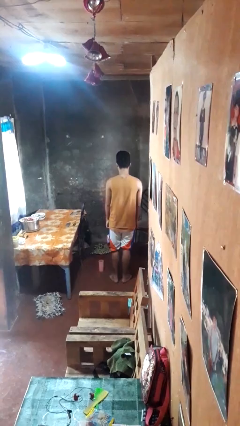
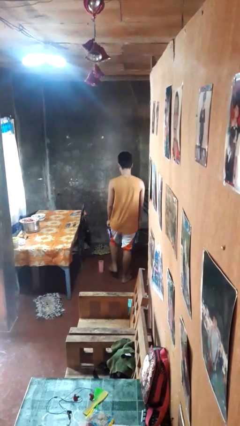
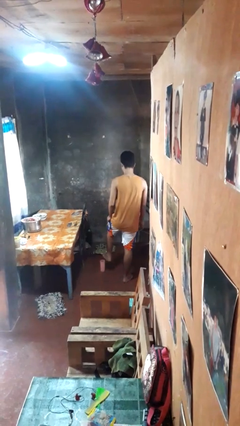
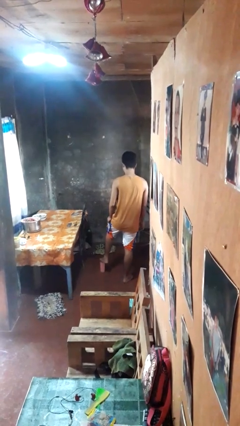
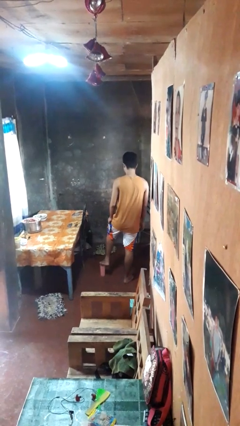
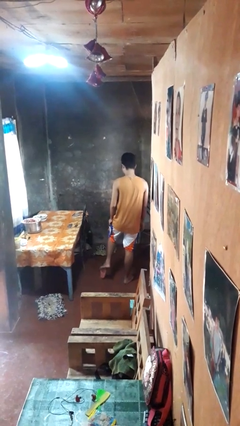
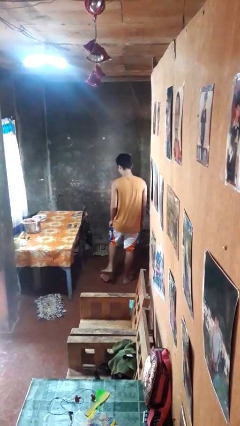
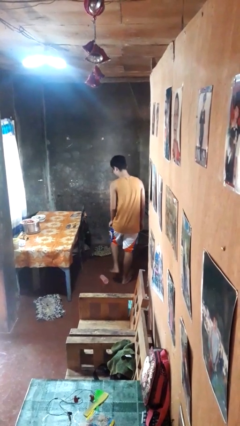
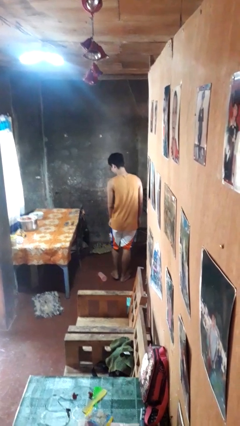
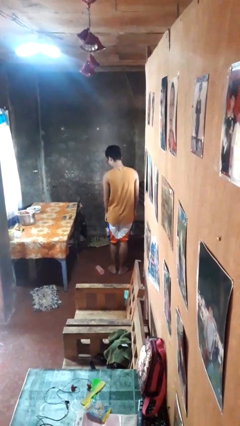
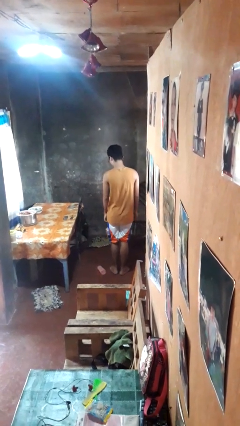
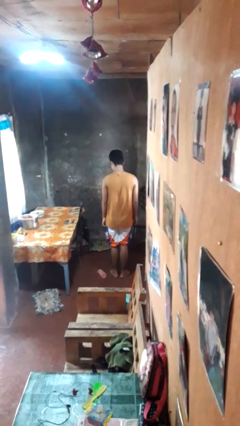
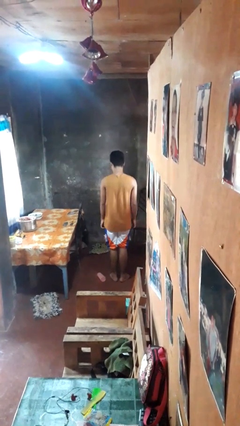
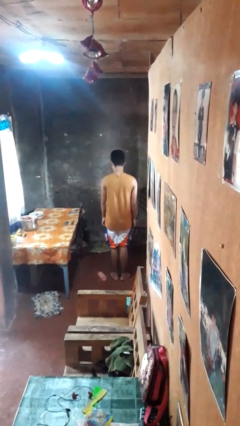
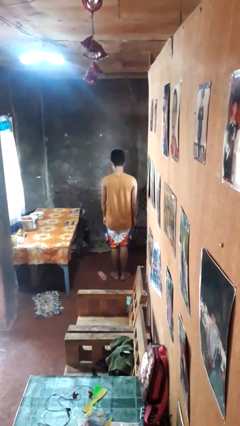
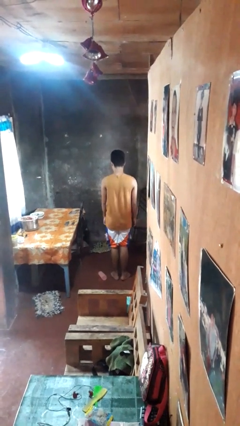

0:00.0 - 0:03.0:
person spills on floor

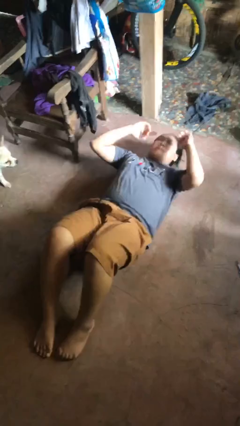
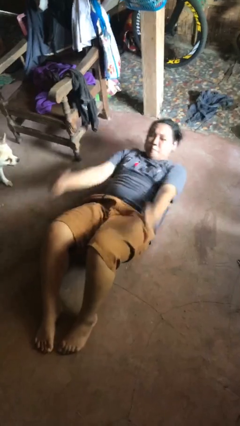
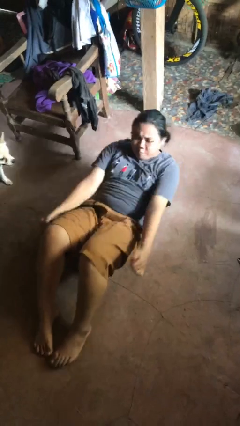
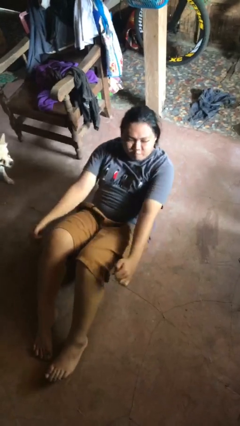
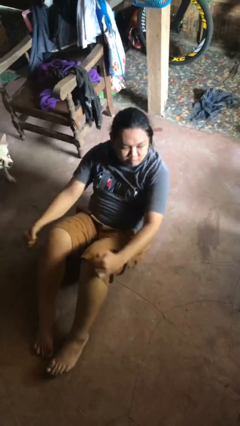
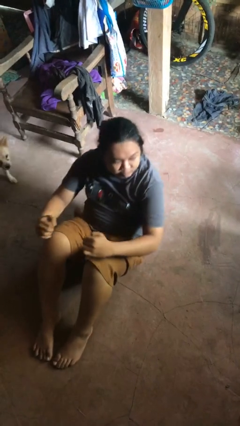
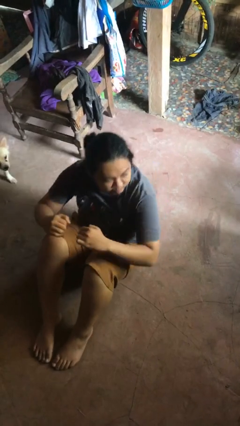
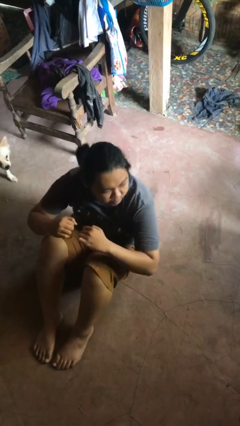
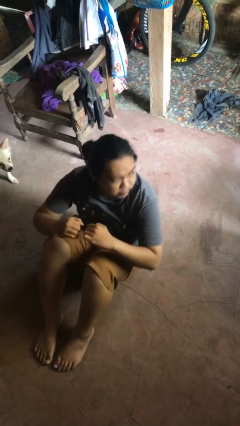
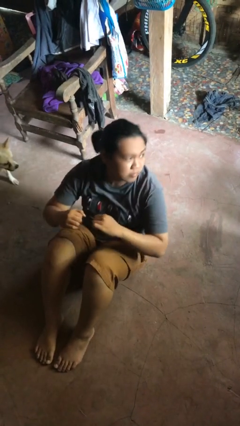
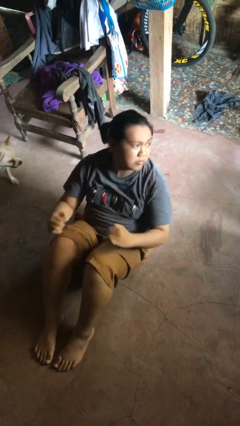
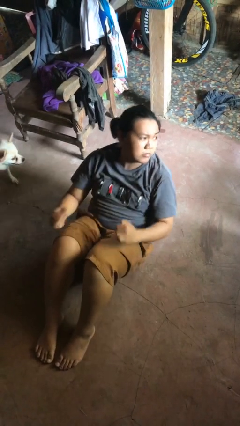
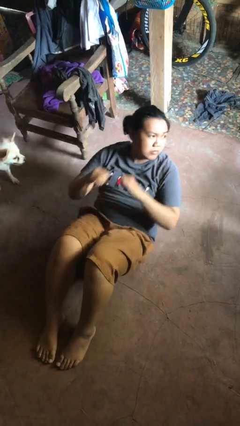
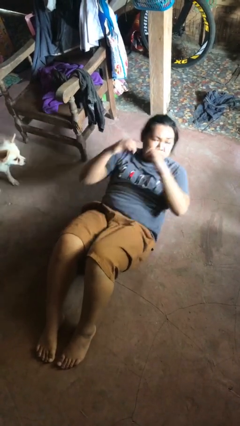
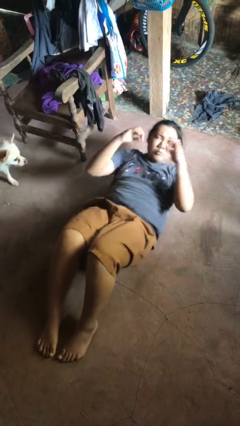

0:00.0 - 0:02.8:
person exercises with situp
